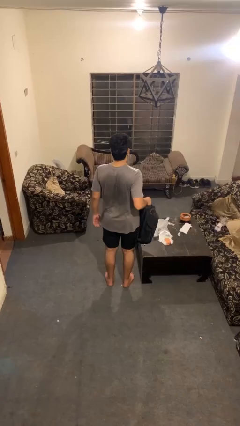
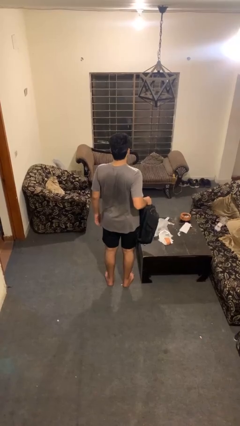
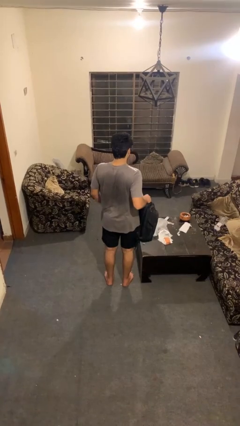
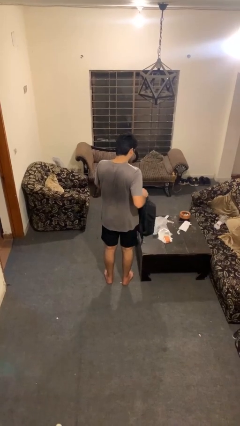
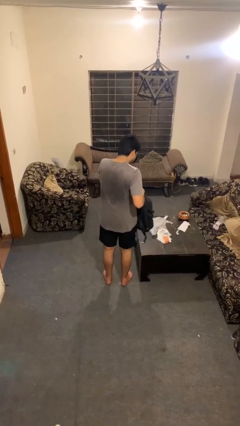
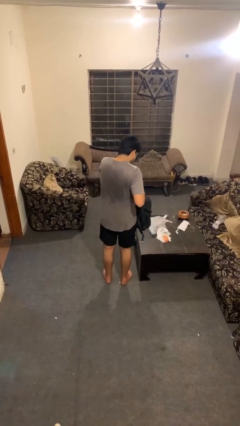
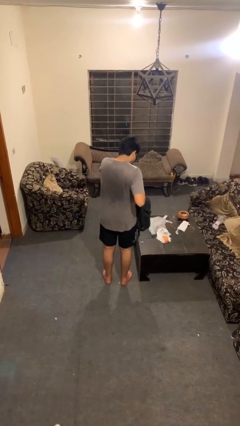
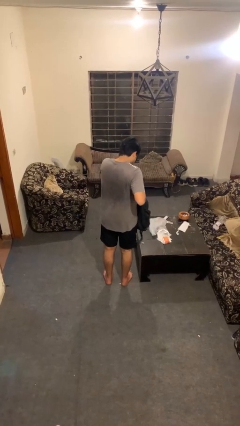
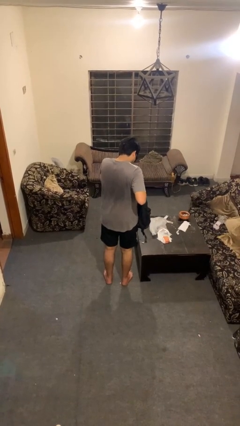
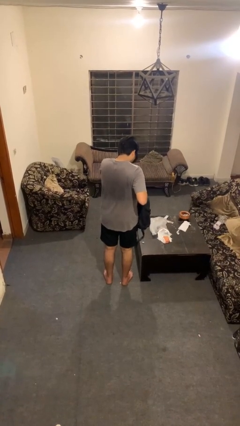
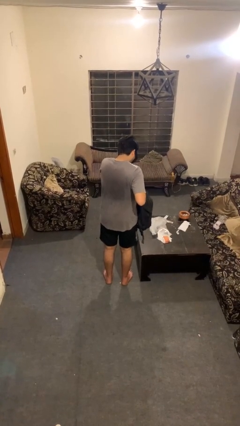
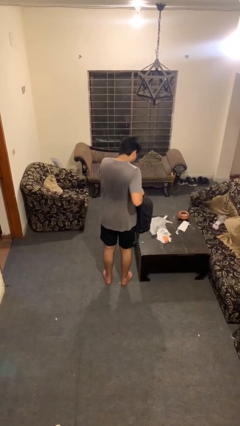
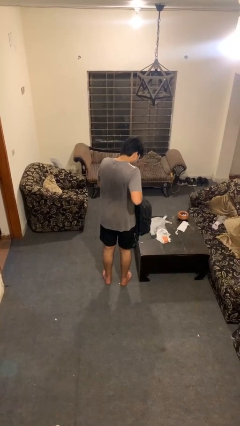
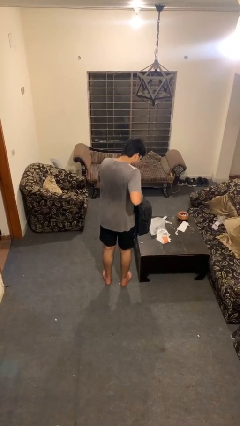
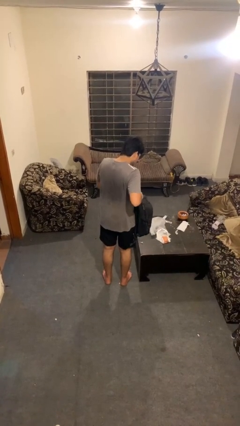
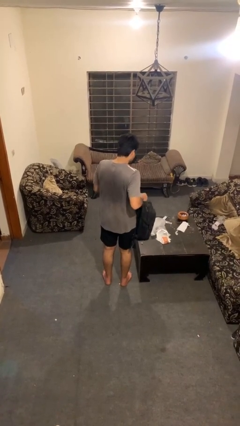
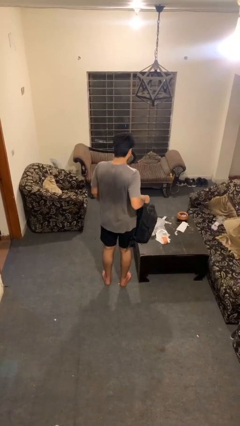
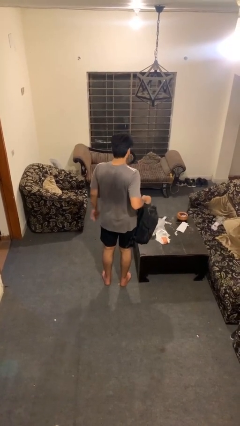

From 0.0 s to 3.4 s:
person searches in bag

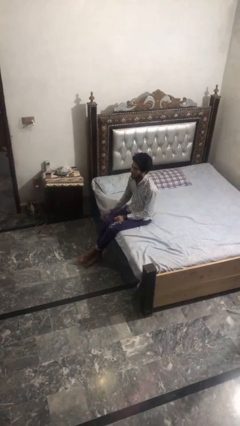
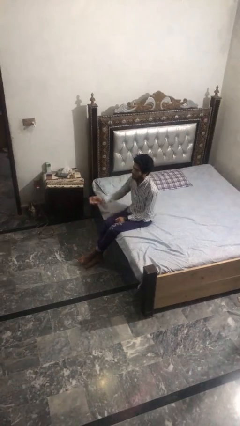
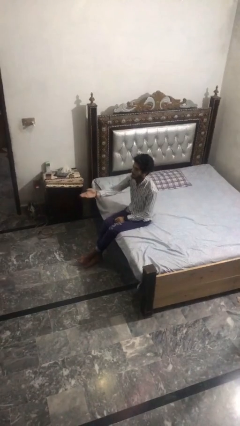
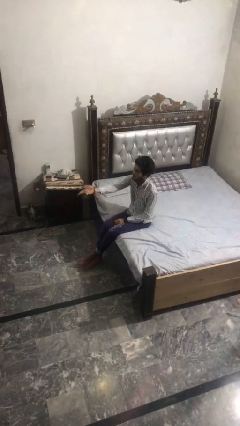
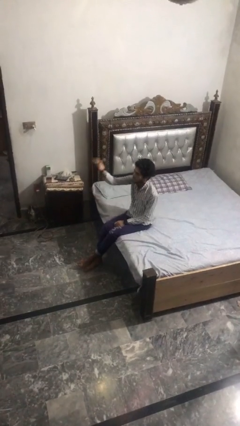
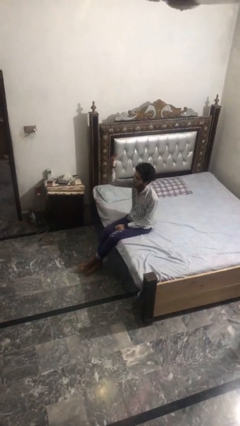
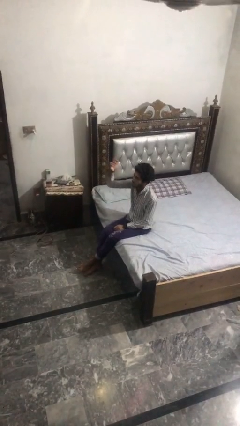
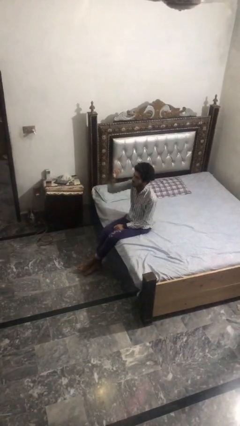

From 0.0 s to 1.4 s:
person gestures swipe up

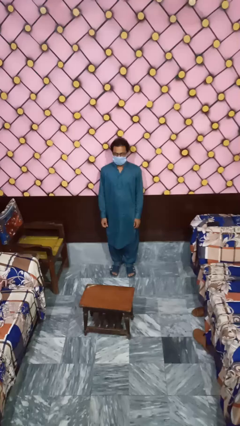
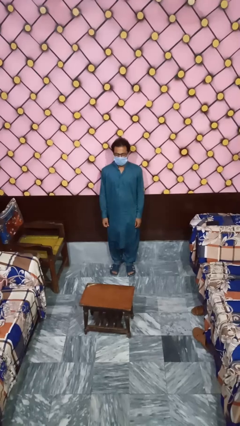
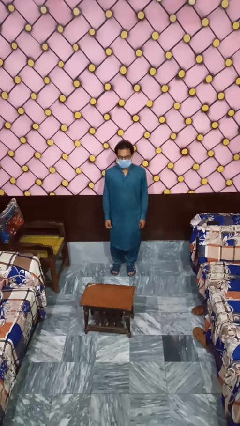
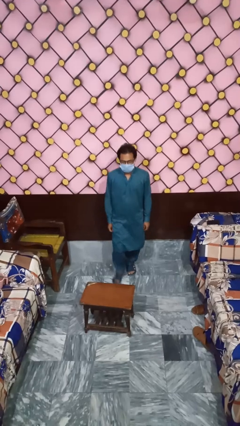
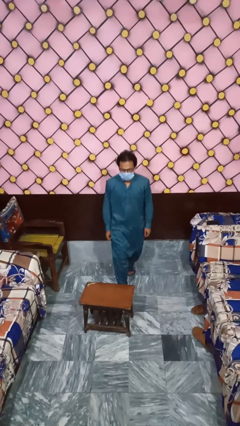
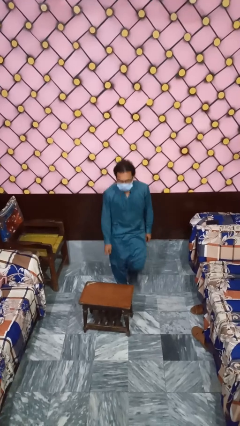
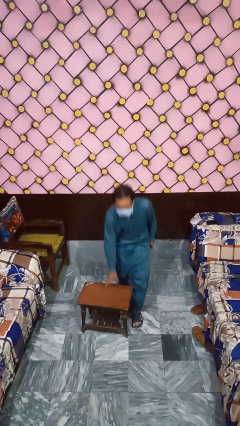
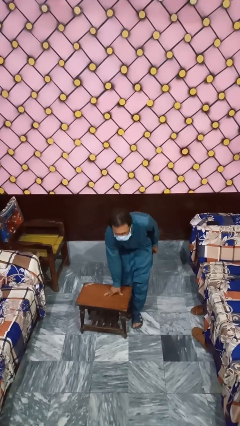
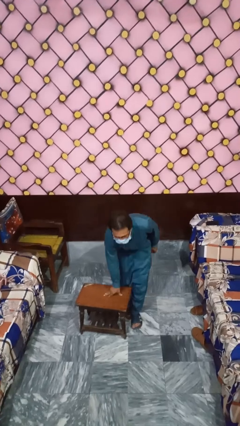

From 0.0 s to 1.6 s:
person bumps into table

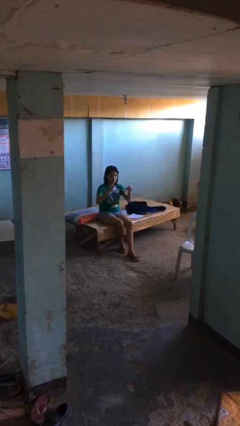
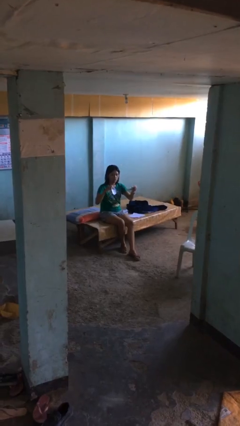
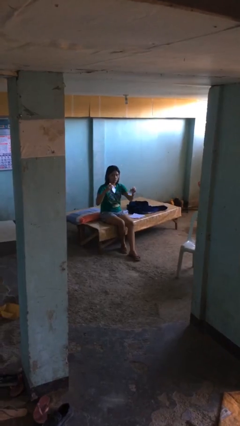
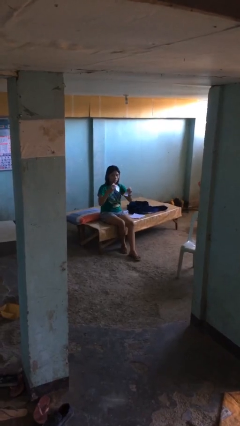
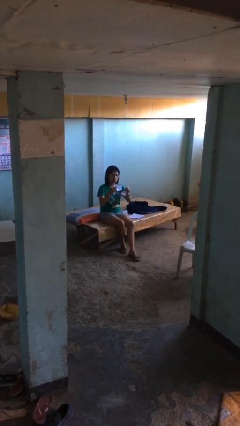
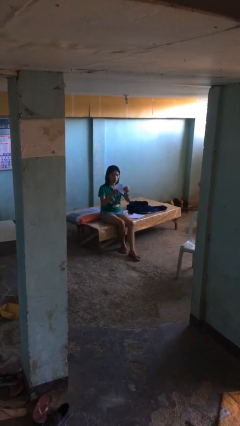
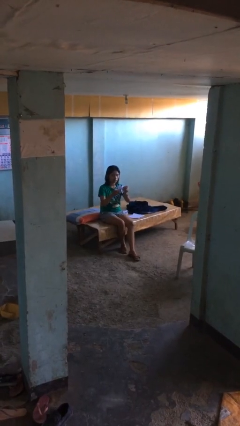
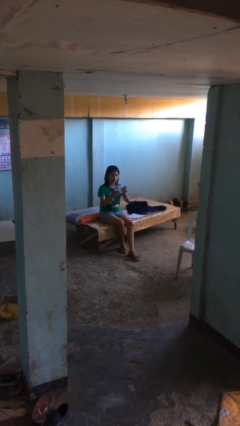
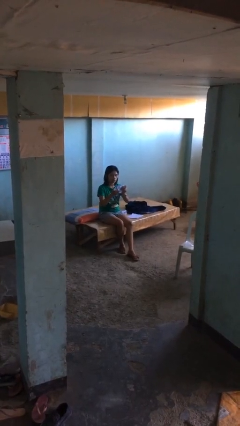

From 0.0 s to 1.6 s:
person tears paper

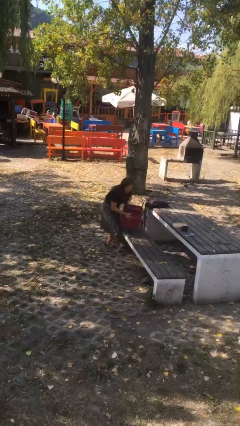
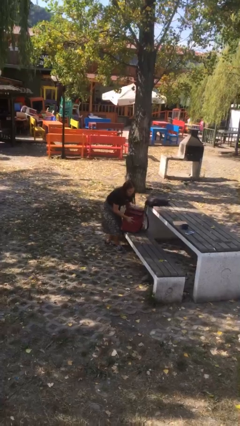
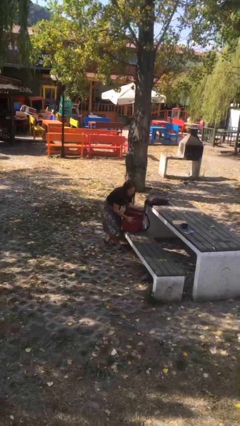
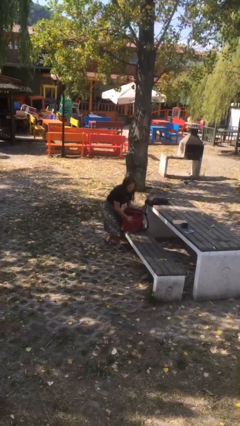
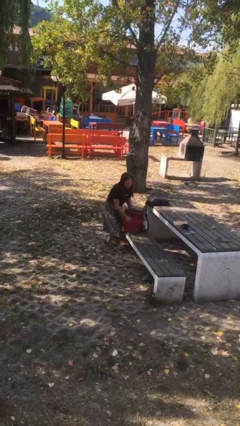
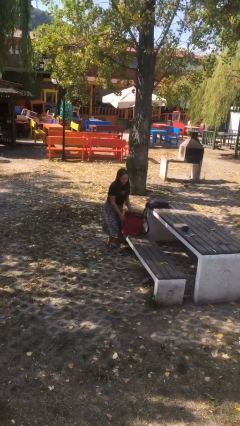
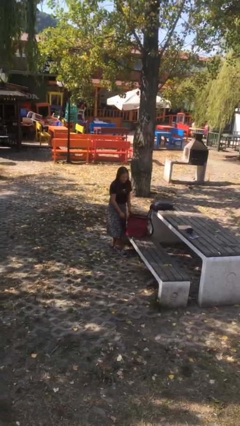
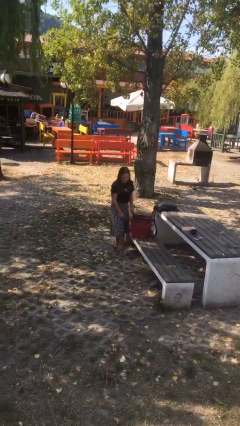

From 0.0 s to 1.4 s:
person puts down object on floor

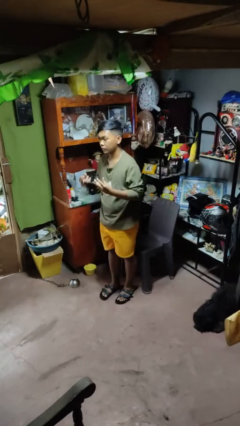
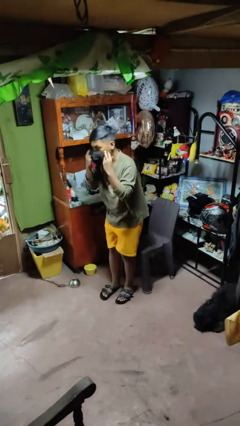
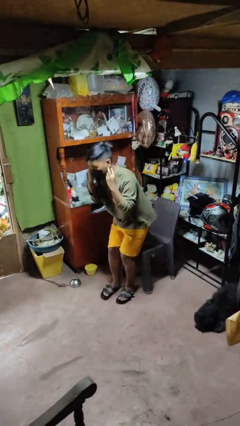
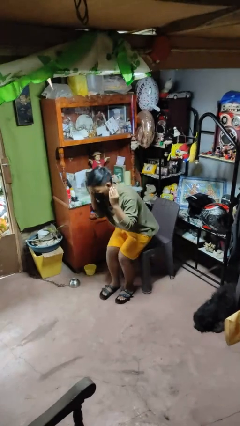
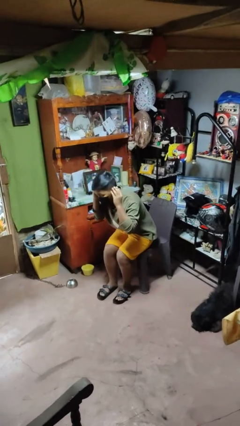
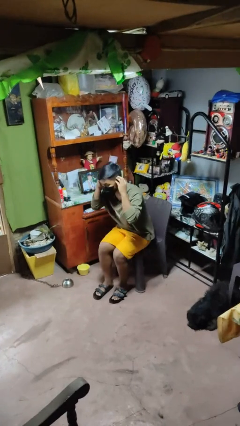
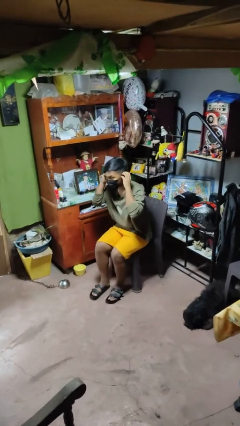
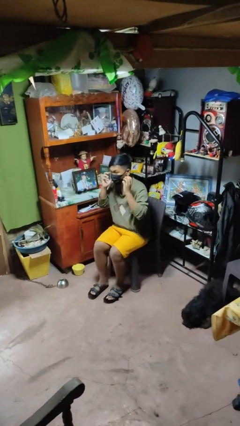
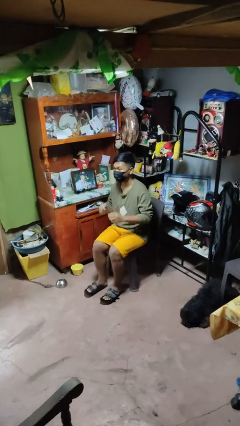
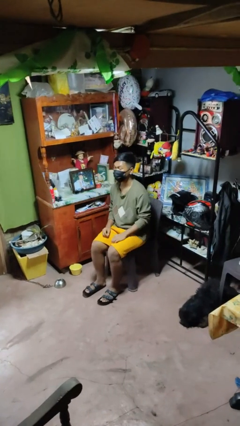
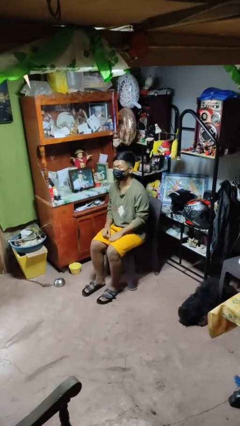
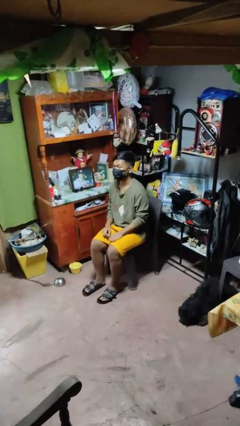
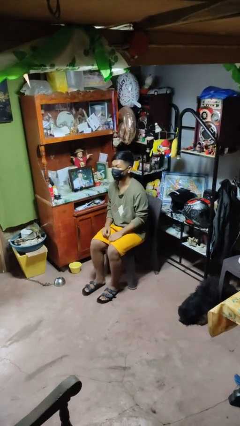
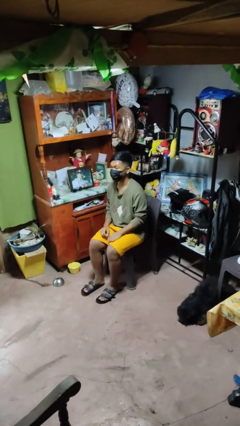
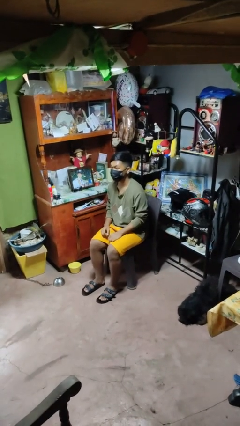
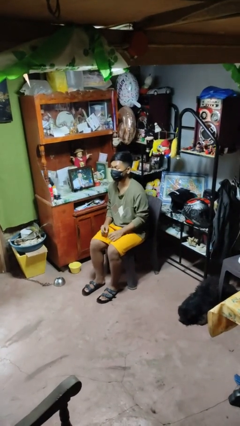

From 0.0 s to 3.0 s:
person puts on facemask

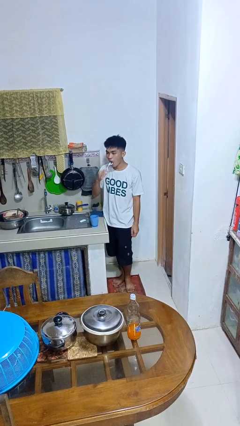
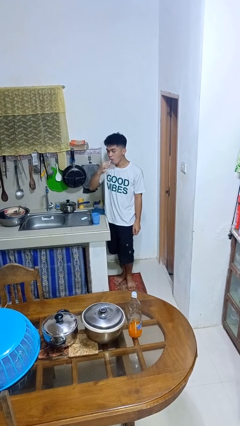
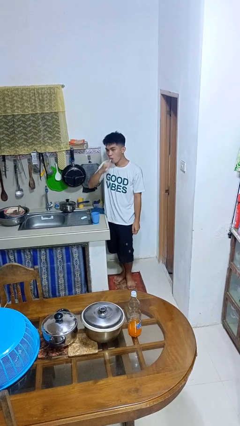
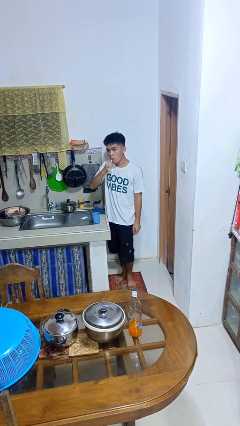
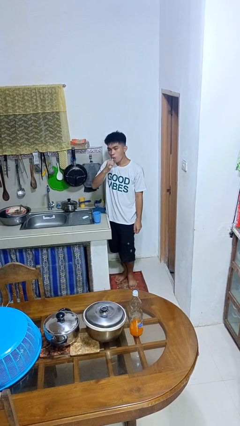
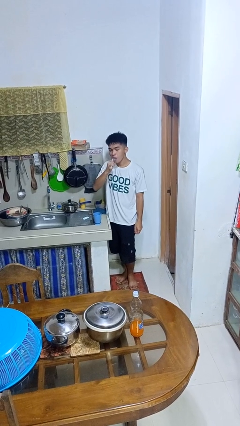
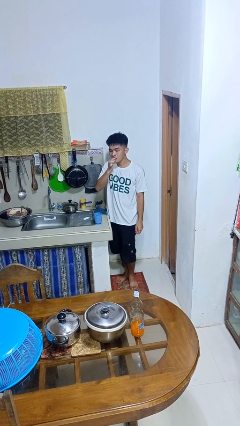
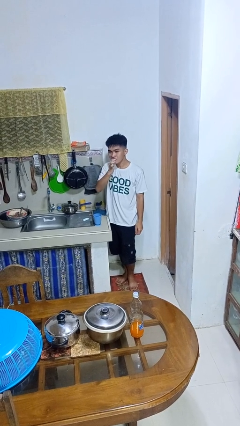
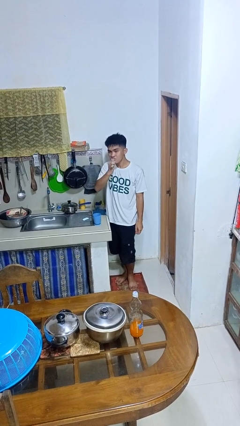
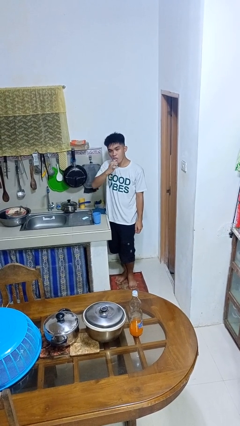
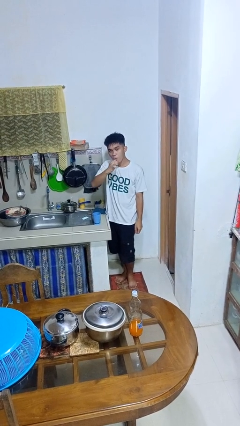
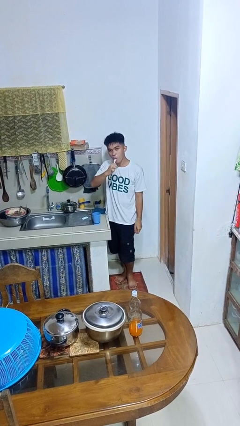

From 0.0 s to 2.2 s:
person brushes teeth

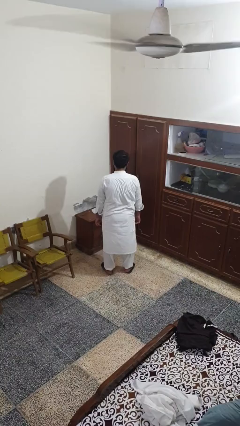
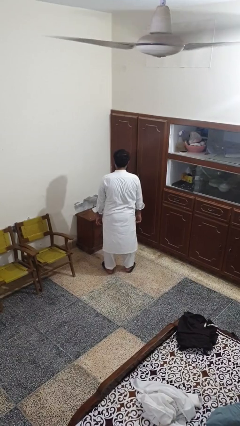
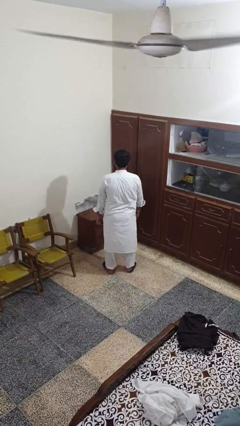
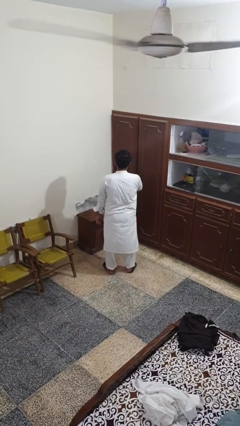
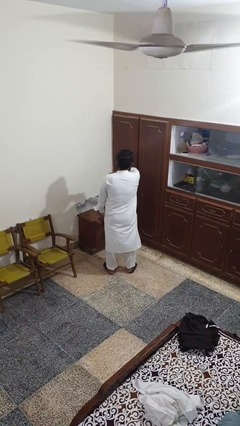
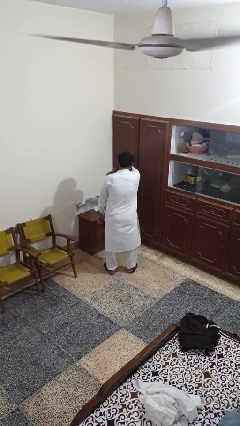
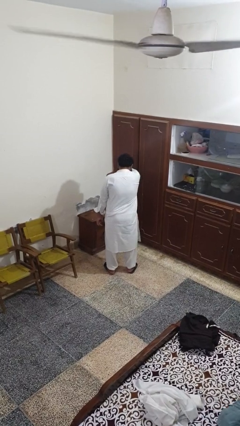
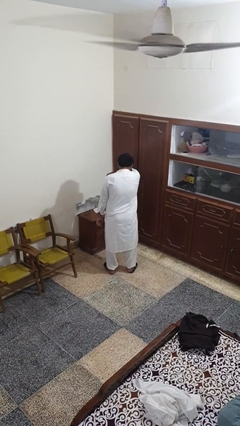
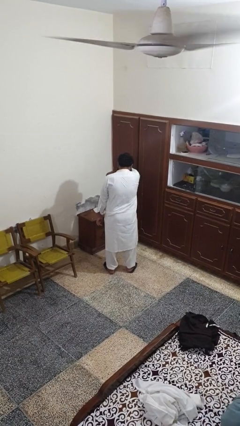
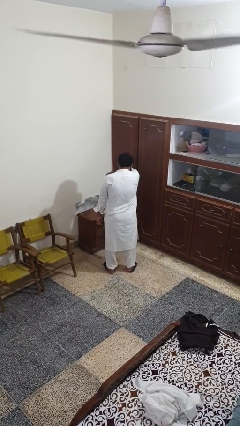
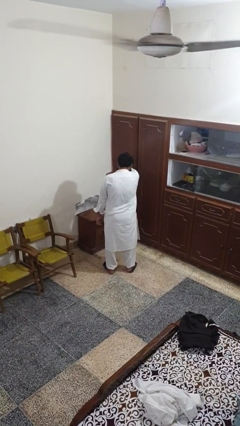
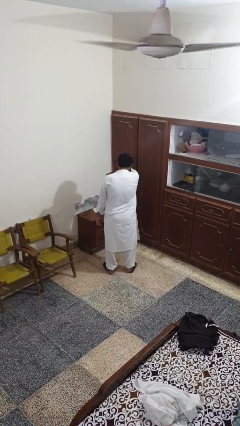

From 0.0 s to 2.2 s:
person sneezes into arm

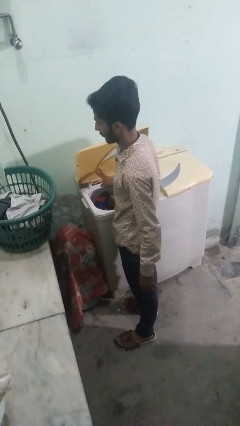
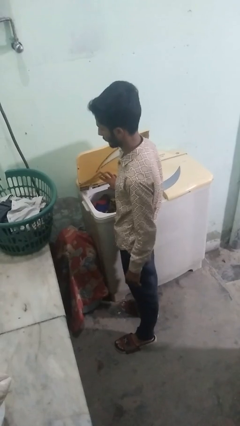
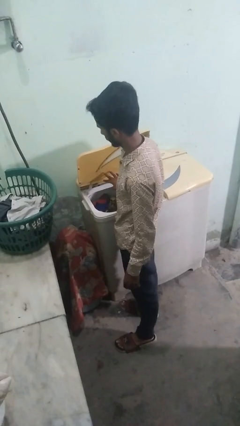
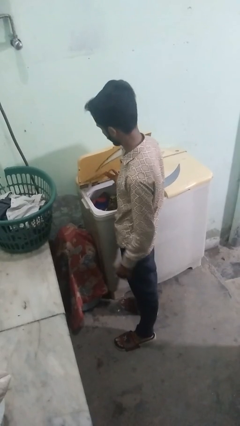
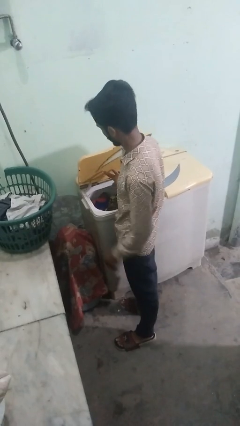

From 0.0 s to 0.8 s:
person loads clotheswasher
